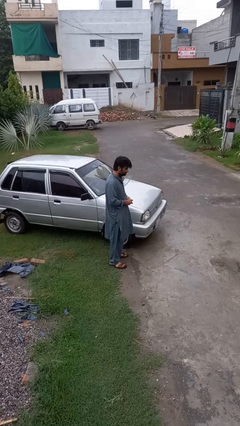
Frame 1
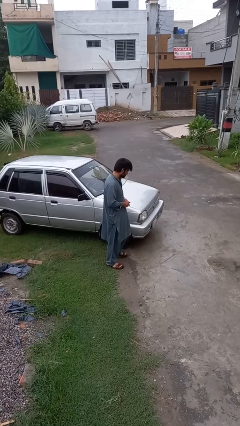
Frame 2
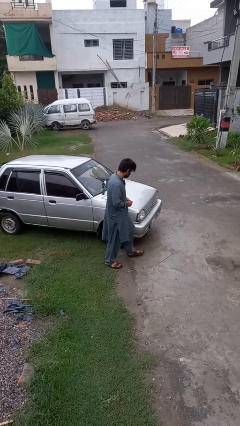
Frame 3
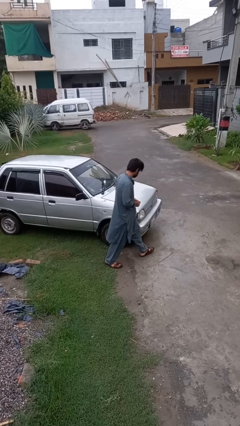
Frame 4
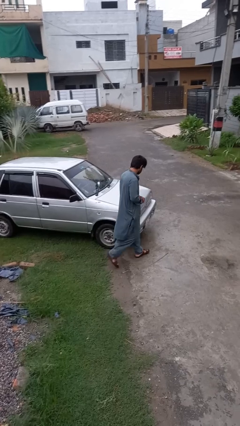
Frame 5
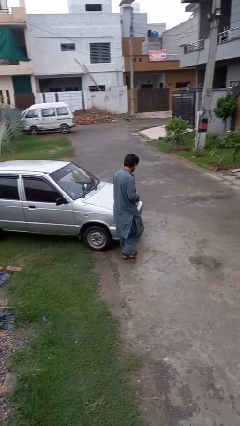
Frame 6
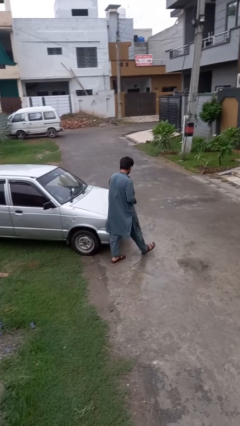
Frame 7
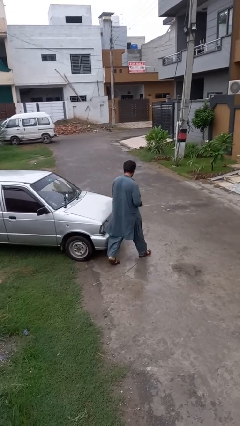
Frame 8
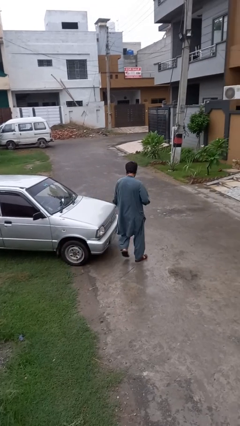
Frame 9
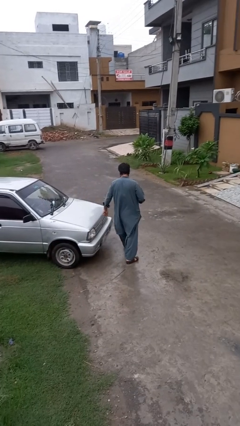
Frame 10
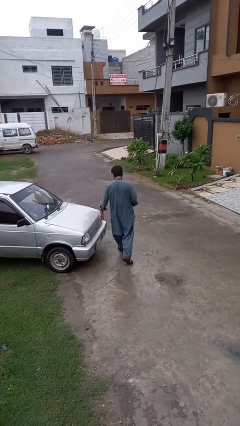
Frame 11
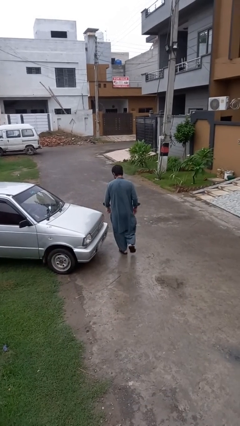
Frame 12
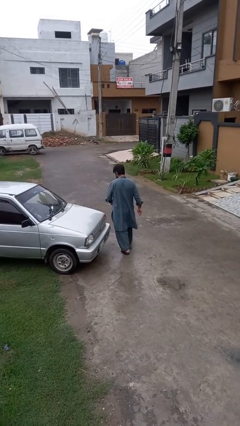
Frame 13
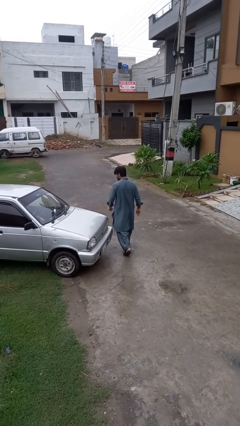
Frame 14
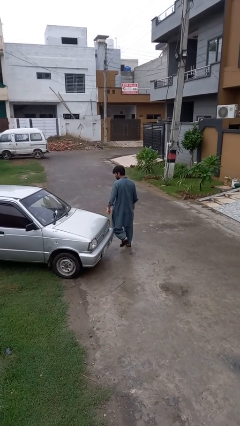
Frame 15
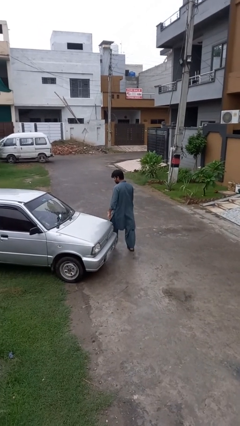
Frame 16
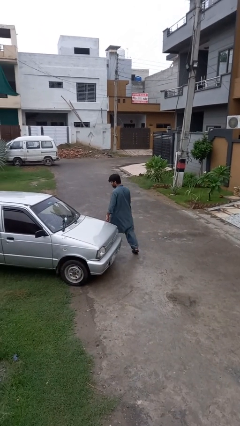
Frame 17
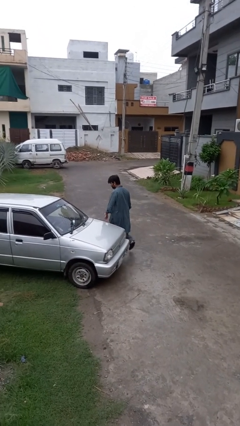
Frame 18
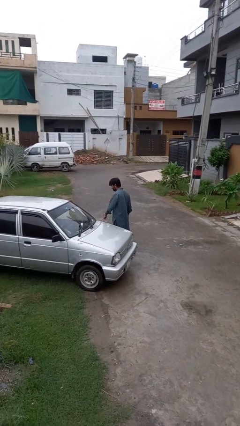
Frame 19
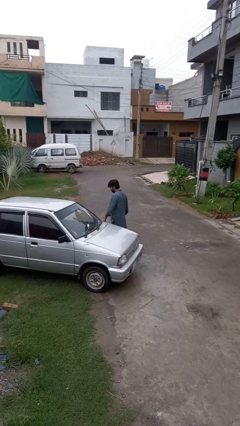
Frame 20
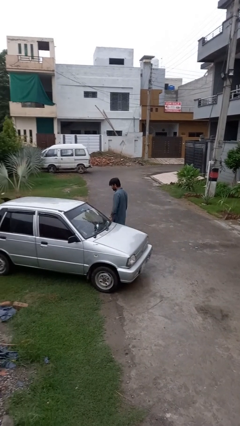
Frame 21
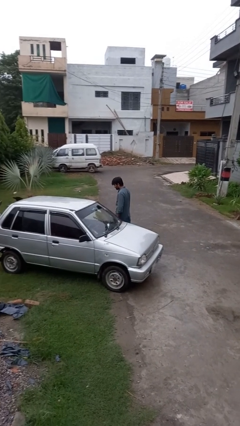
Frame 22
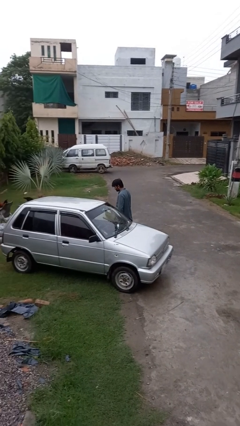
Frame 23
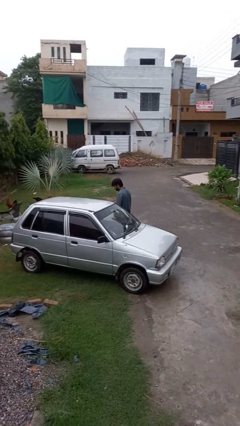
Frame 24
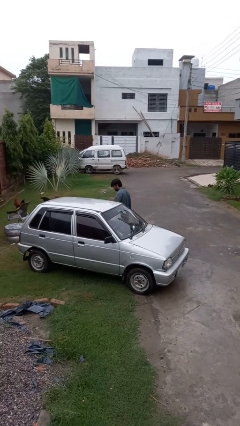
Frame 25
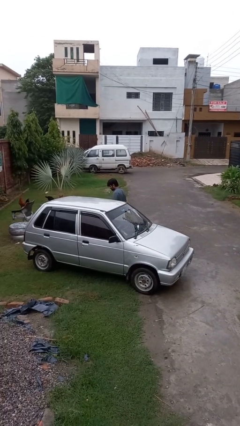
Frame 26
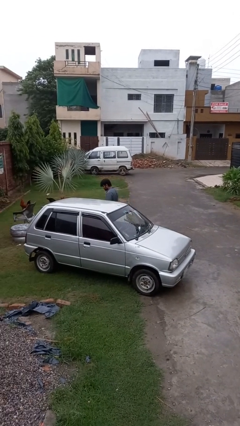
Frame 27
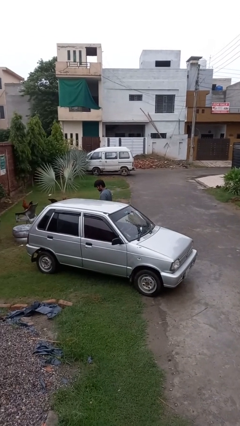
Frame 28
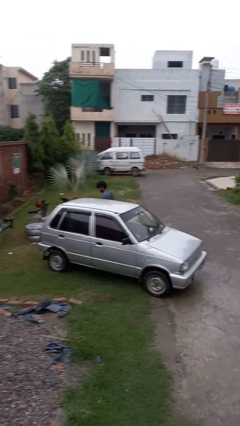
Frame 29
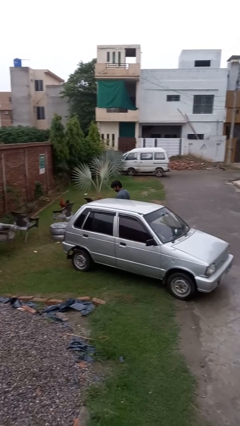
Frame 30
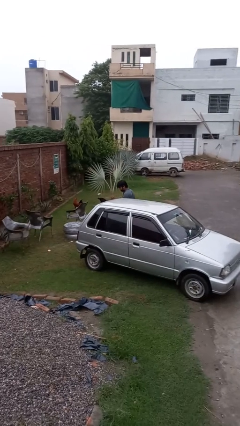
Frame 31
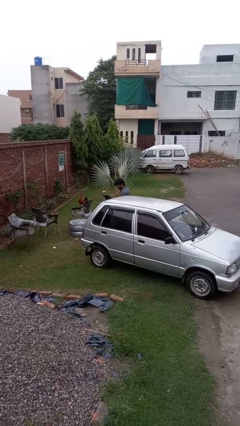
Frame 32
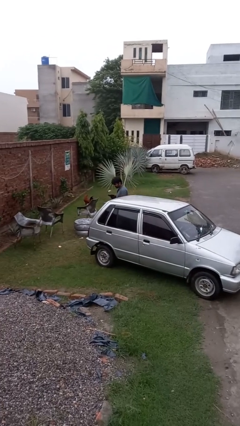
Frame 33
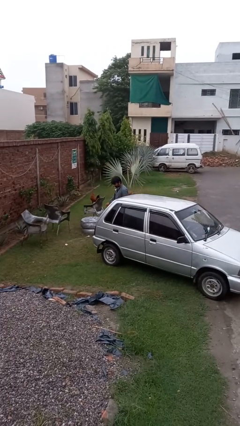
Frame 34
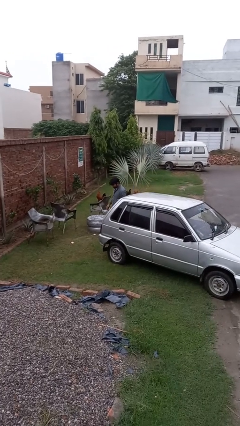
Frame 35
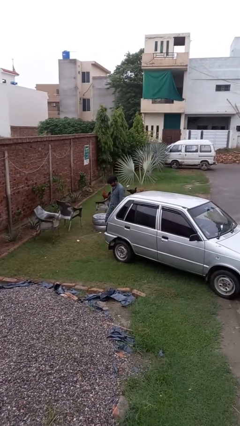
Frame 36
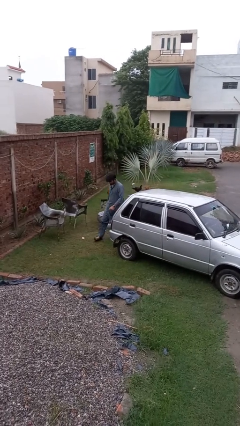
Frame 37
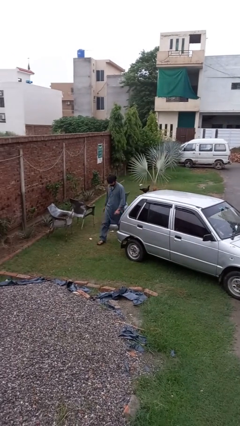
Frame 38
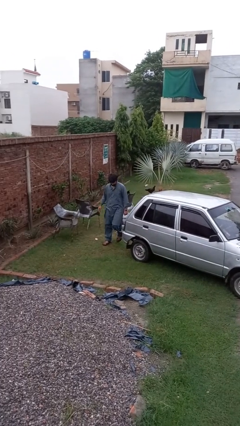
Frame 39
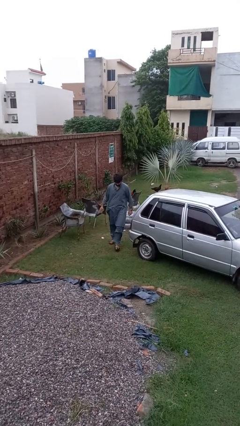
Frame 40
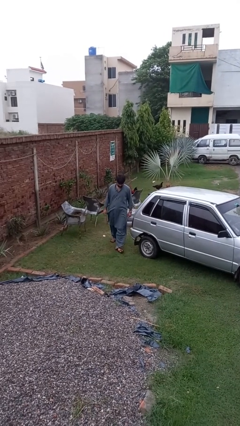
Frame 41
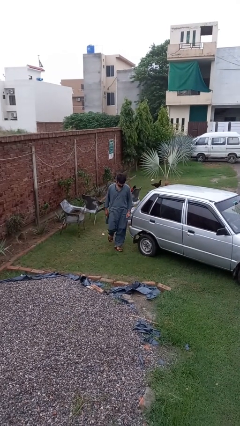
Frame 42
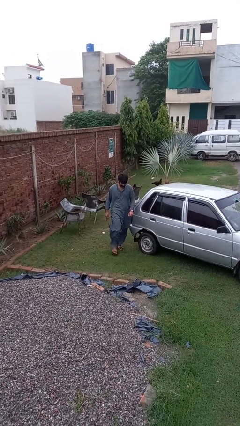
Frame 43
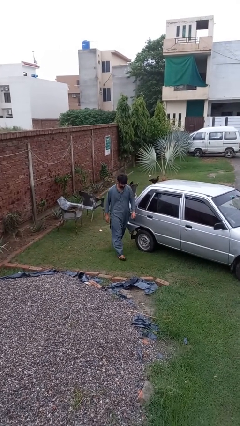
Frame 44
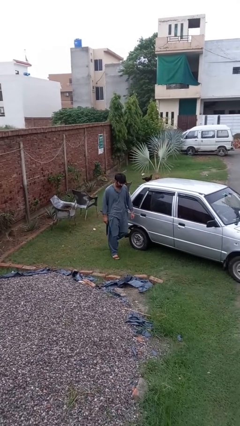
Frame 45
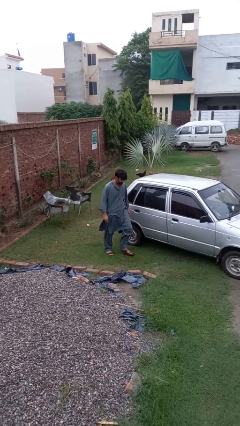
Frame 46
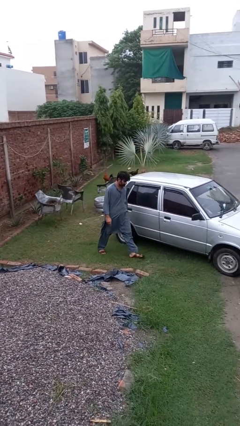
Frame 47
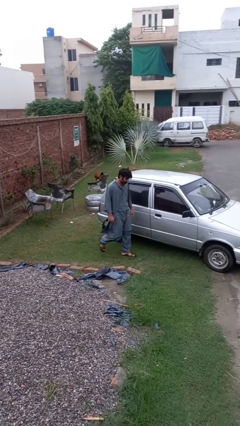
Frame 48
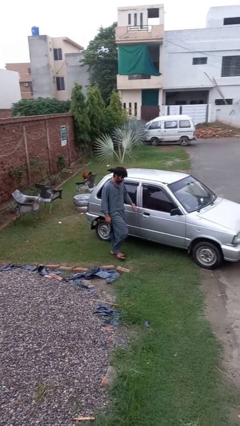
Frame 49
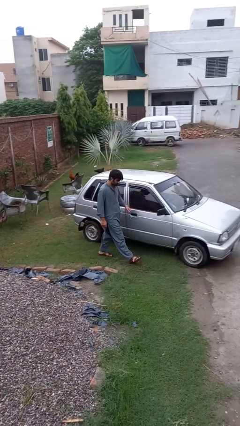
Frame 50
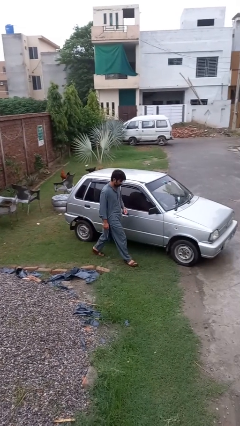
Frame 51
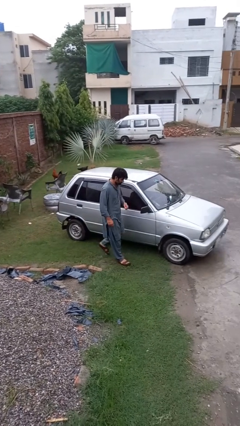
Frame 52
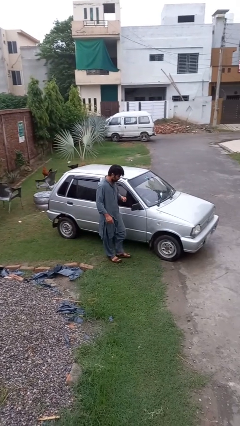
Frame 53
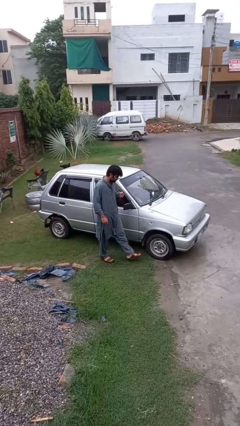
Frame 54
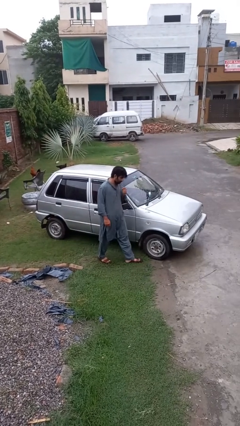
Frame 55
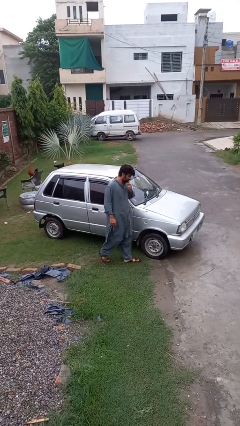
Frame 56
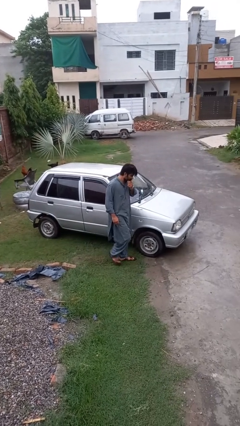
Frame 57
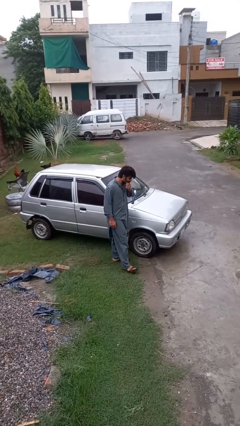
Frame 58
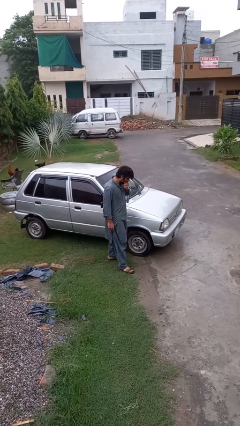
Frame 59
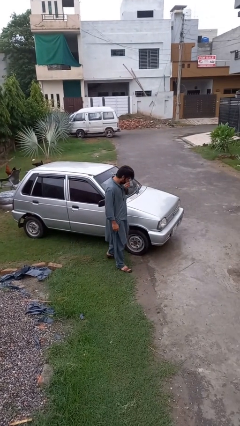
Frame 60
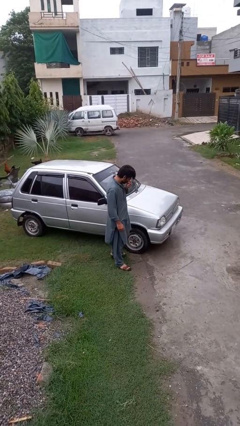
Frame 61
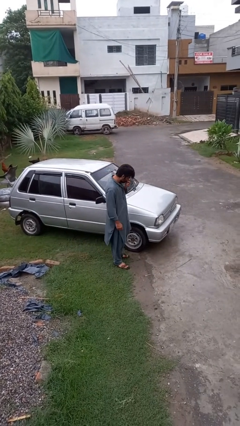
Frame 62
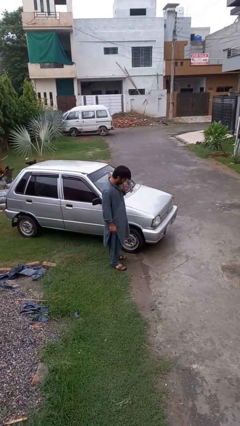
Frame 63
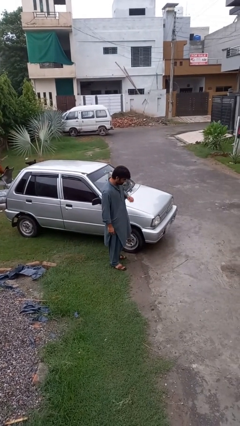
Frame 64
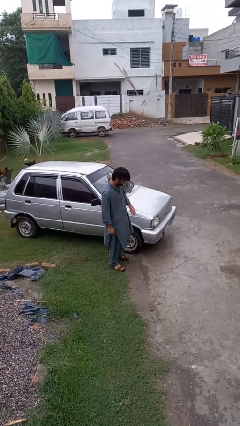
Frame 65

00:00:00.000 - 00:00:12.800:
person walks around car

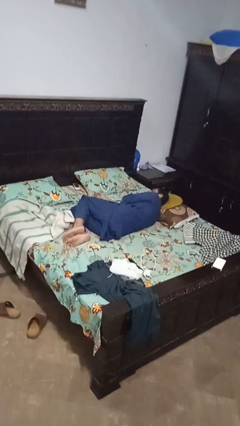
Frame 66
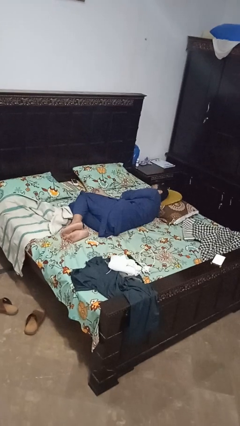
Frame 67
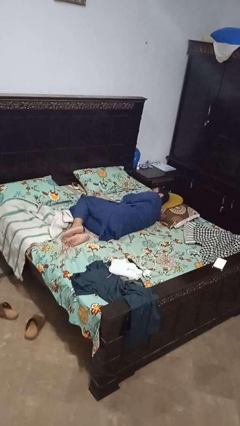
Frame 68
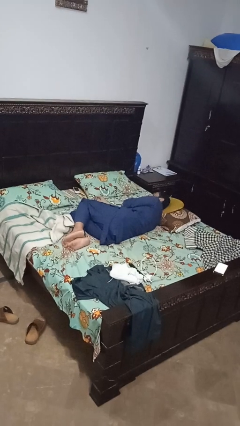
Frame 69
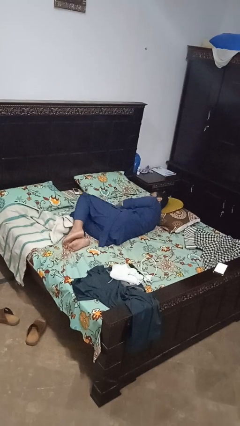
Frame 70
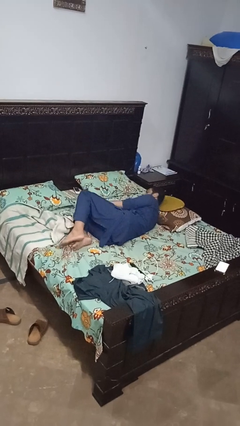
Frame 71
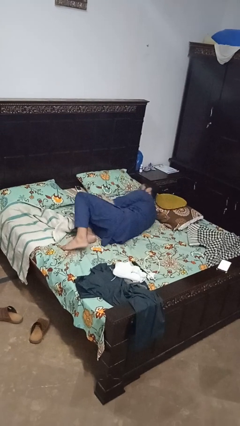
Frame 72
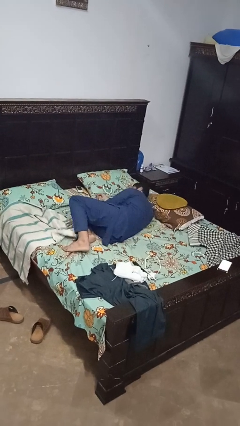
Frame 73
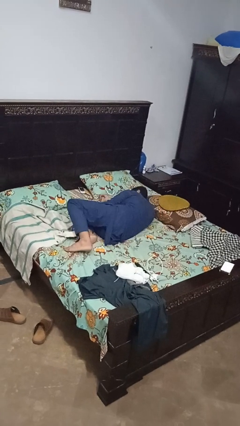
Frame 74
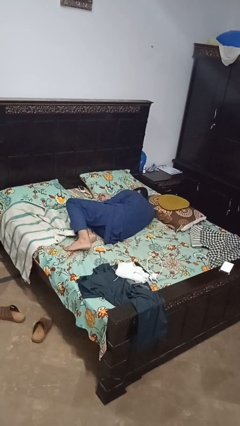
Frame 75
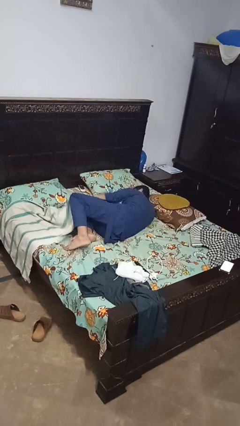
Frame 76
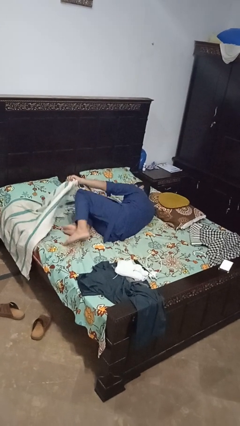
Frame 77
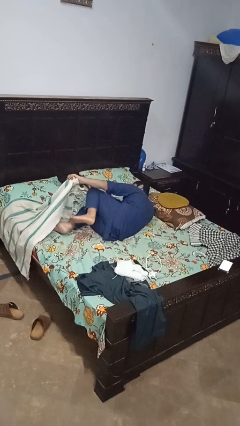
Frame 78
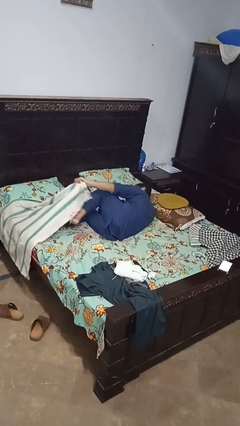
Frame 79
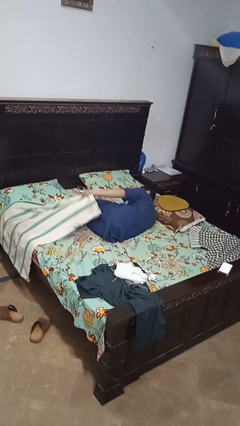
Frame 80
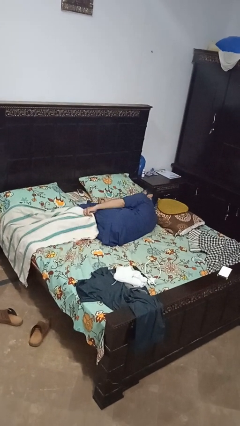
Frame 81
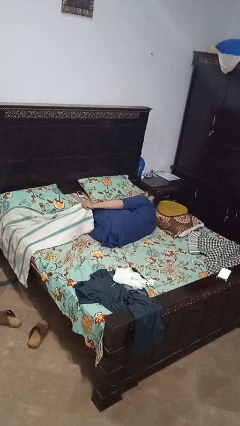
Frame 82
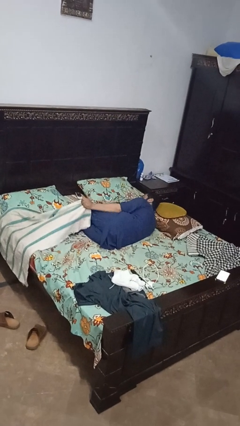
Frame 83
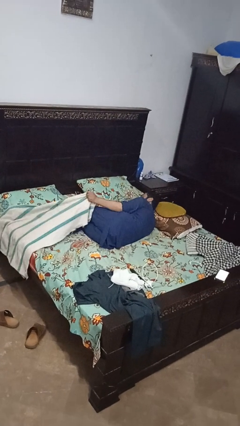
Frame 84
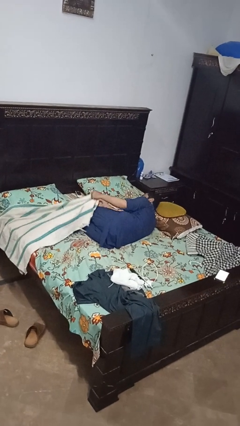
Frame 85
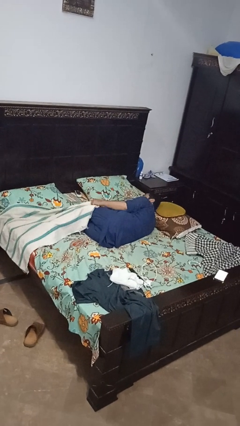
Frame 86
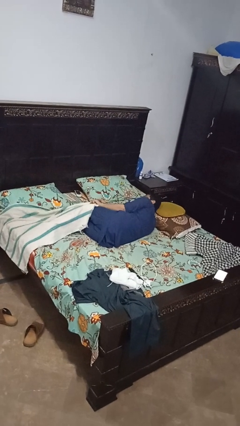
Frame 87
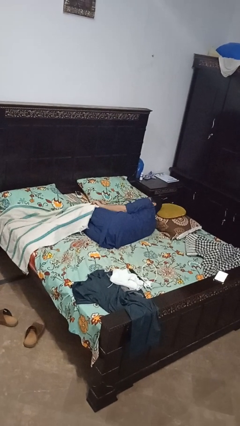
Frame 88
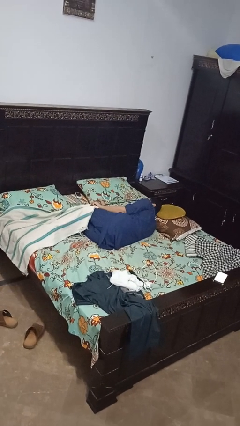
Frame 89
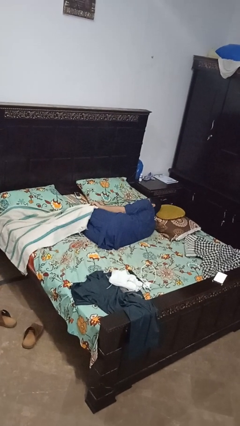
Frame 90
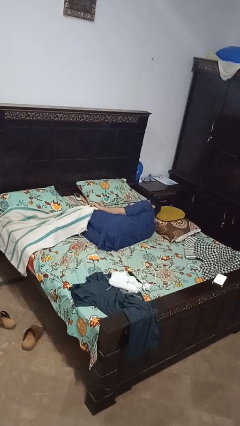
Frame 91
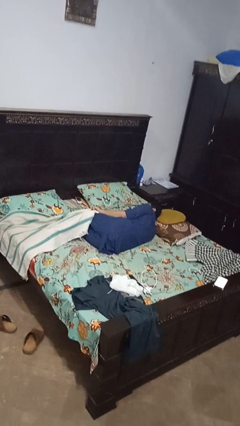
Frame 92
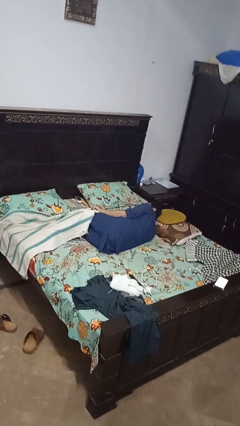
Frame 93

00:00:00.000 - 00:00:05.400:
person covers with bedsheets
